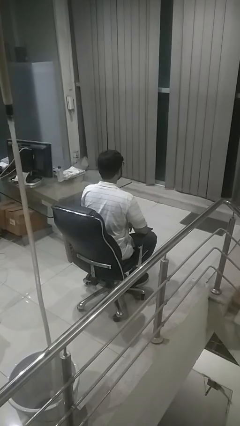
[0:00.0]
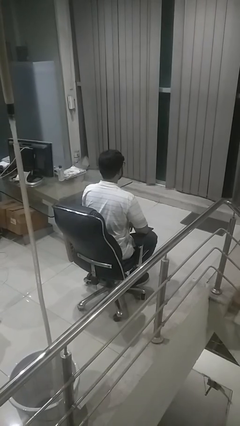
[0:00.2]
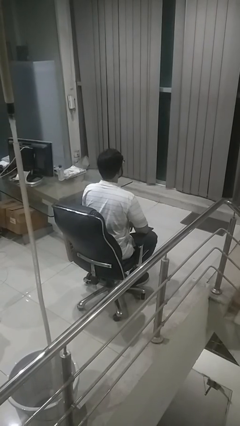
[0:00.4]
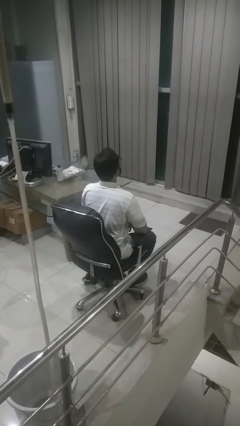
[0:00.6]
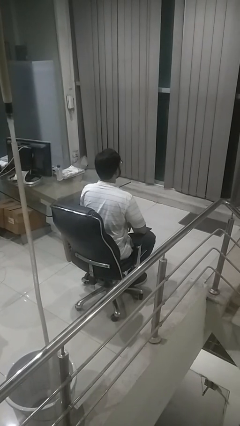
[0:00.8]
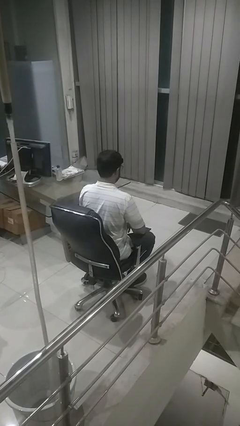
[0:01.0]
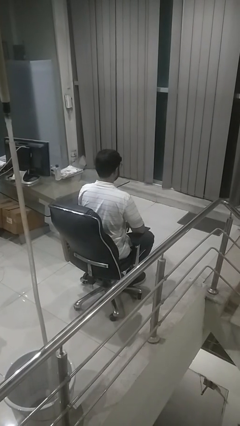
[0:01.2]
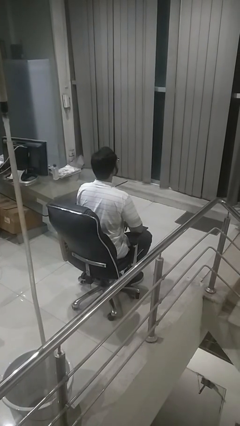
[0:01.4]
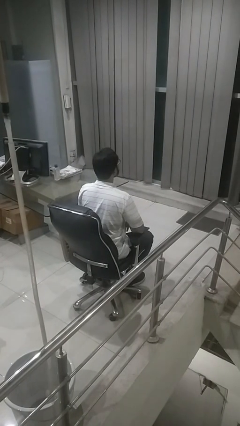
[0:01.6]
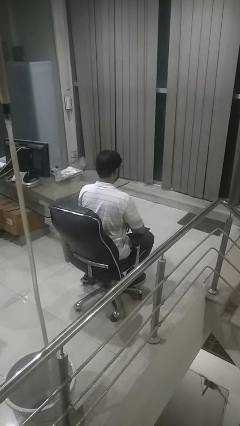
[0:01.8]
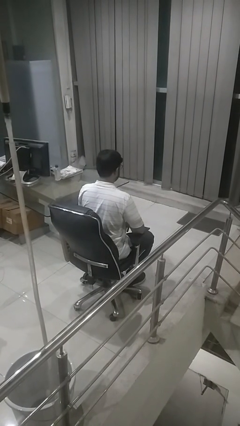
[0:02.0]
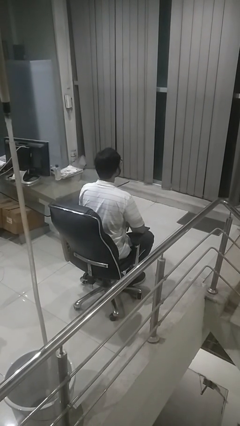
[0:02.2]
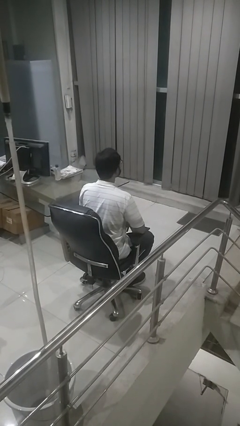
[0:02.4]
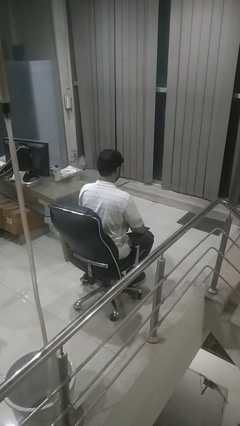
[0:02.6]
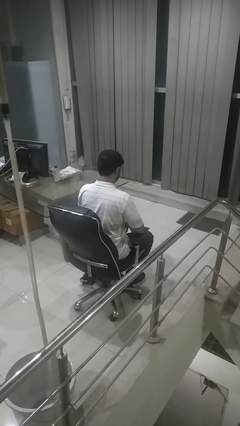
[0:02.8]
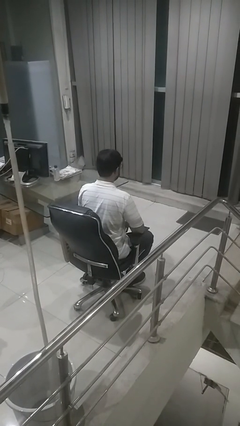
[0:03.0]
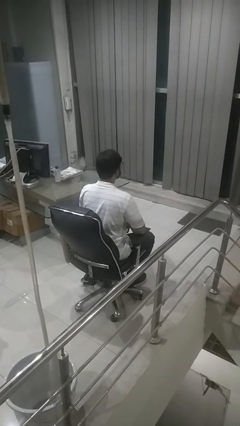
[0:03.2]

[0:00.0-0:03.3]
person nods head

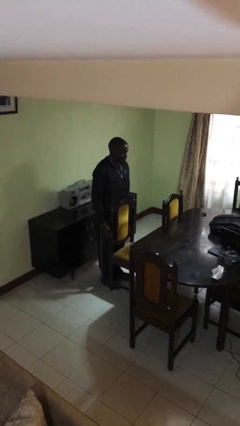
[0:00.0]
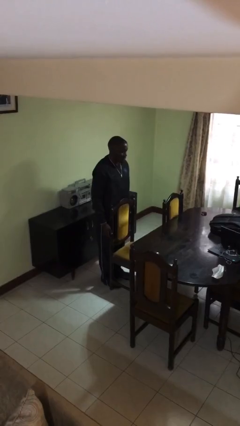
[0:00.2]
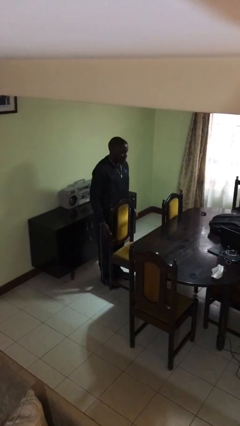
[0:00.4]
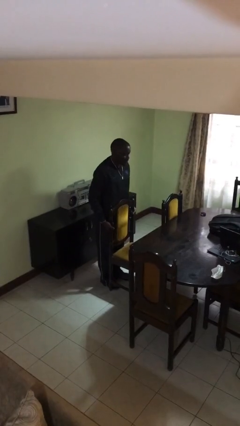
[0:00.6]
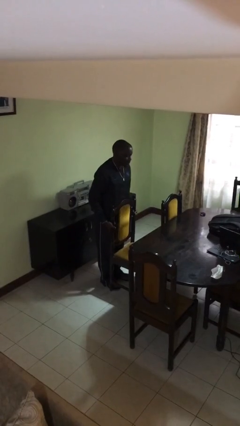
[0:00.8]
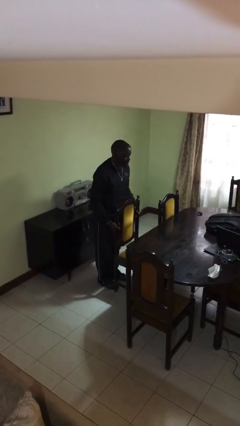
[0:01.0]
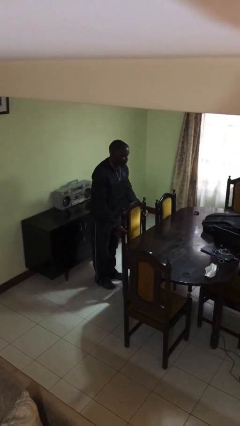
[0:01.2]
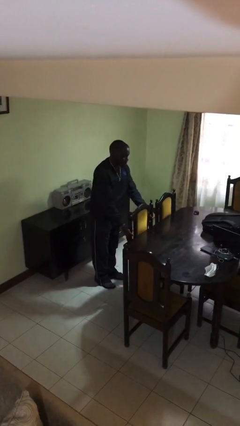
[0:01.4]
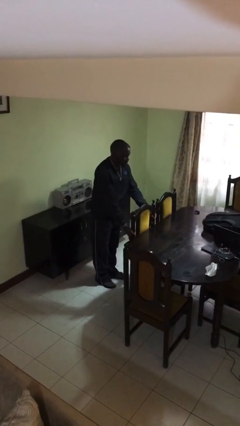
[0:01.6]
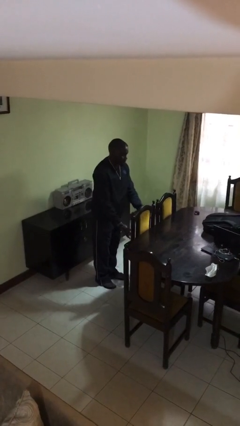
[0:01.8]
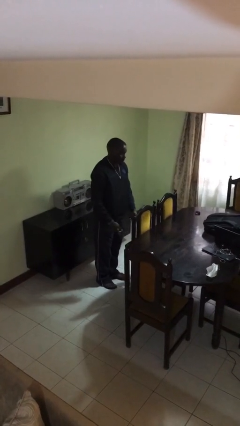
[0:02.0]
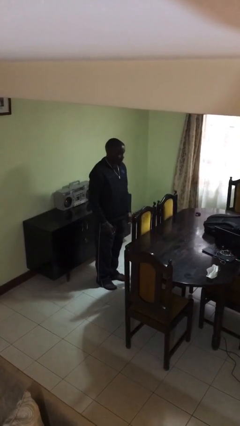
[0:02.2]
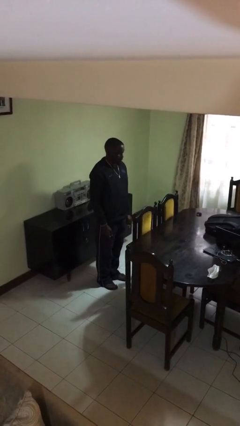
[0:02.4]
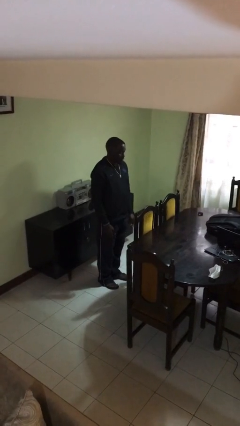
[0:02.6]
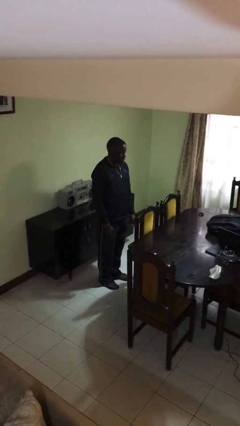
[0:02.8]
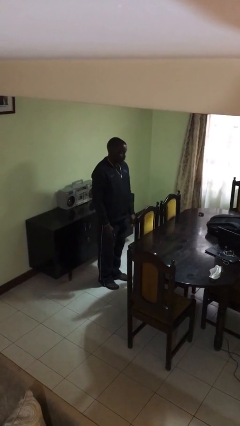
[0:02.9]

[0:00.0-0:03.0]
person pushes in chair

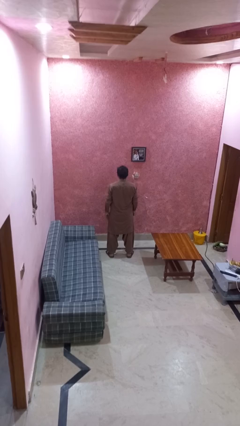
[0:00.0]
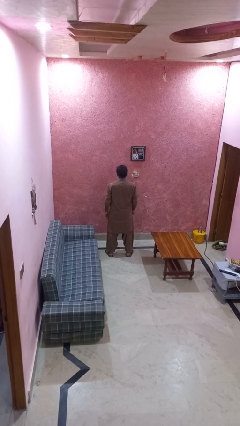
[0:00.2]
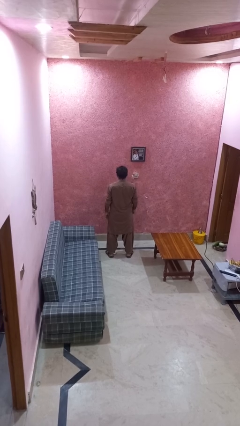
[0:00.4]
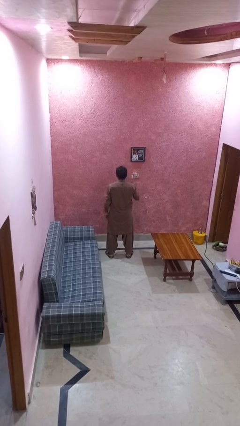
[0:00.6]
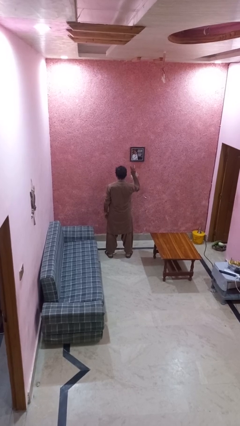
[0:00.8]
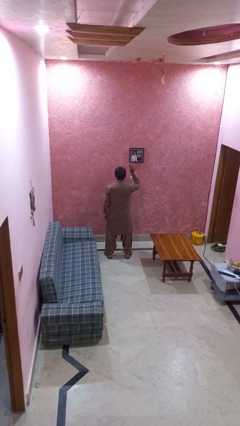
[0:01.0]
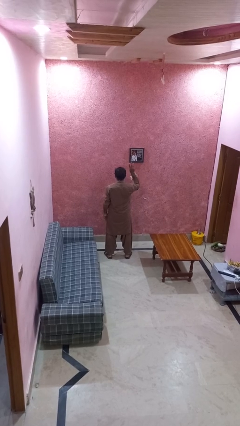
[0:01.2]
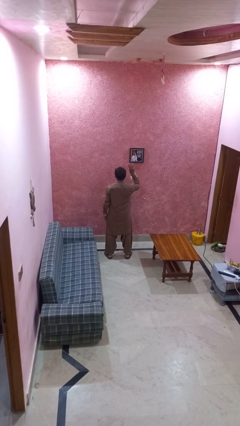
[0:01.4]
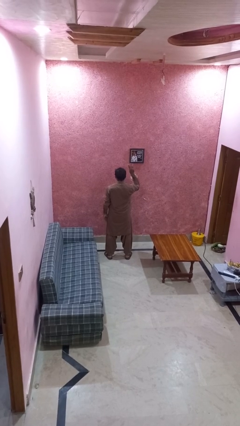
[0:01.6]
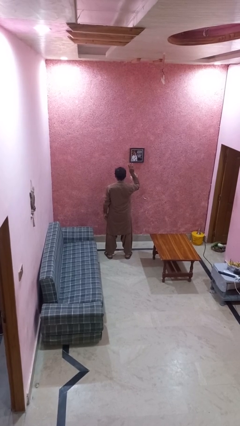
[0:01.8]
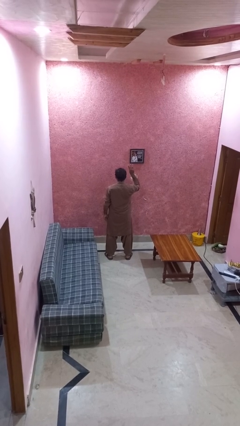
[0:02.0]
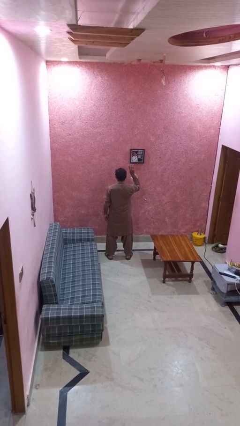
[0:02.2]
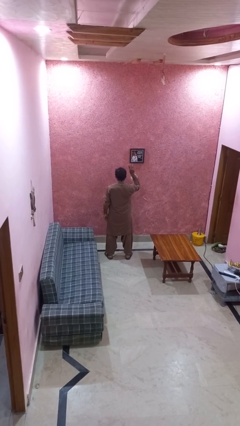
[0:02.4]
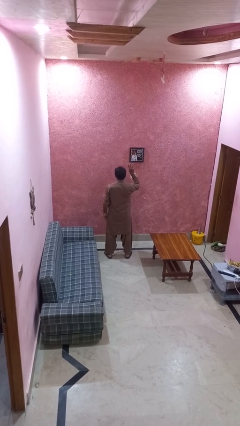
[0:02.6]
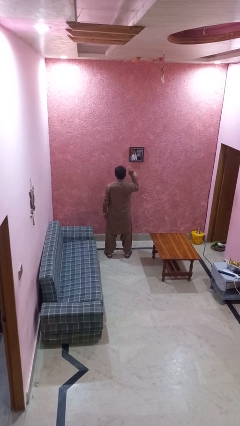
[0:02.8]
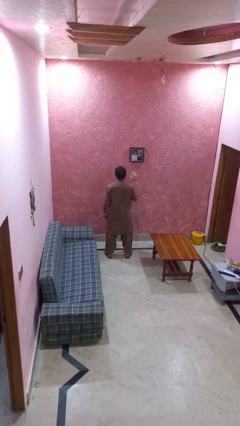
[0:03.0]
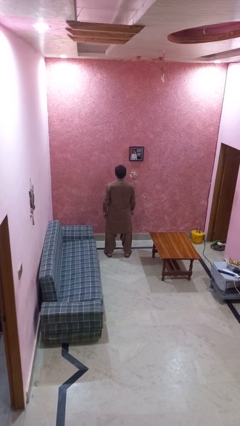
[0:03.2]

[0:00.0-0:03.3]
person gestures number three

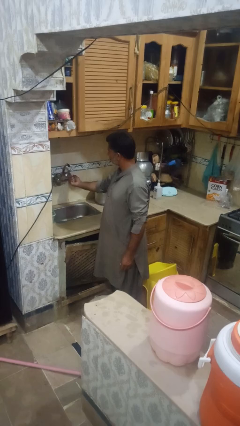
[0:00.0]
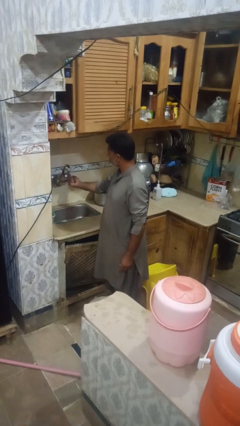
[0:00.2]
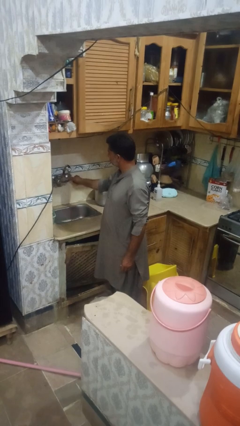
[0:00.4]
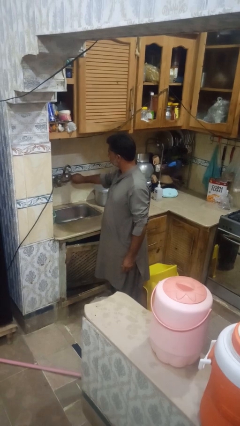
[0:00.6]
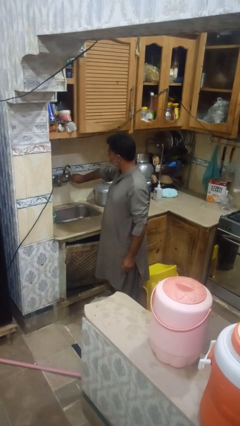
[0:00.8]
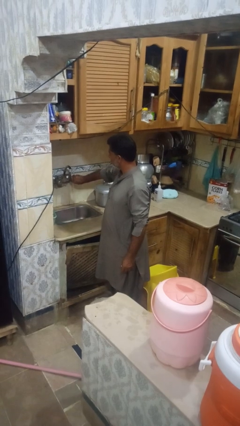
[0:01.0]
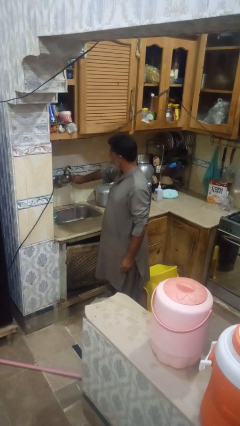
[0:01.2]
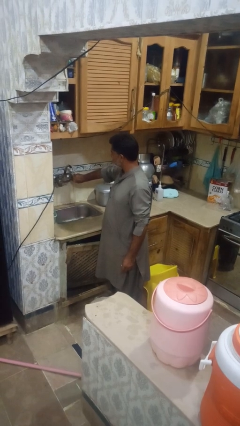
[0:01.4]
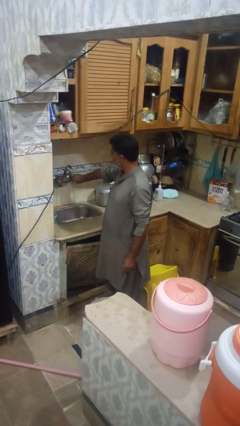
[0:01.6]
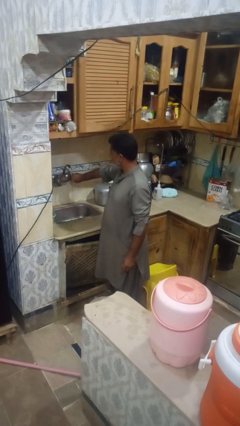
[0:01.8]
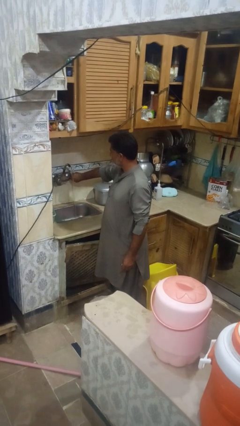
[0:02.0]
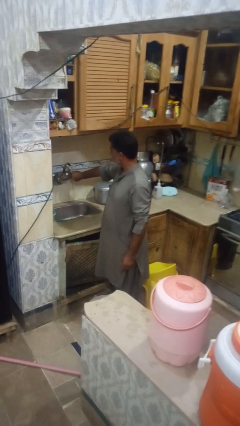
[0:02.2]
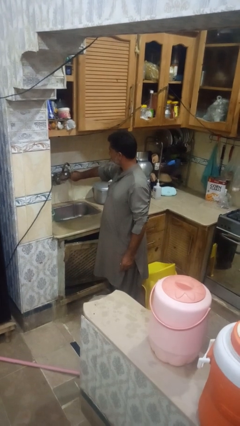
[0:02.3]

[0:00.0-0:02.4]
person turns on faucet

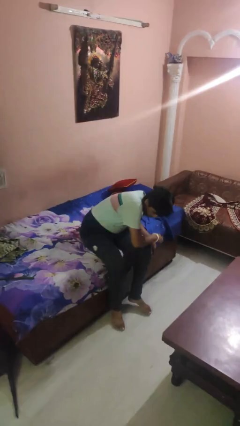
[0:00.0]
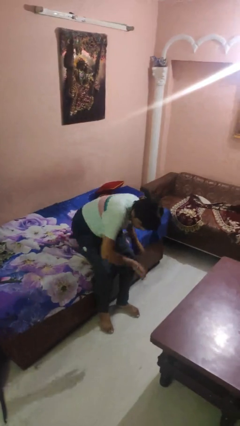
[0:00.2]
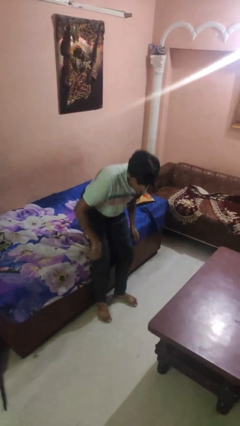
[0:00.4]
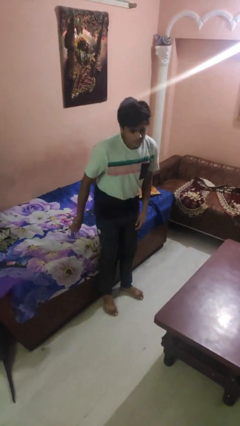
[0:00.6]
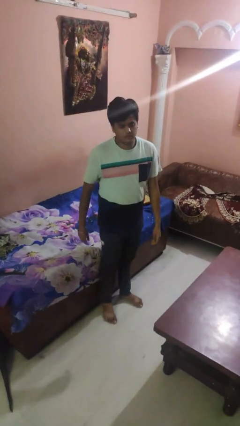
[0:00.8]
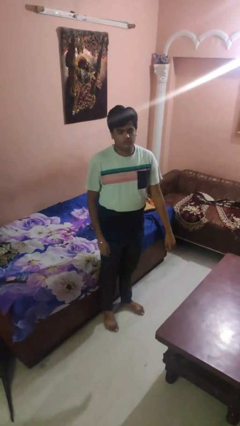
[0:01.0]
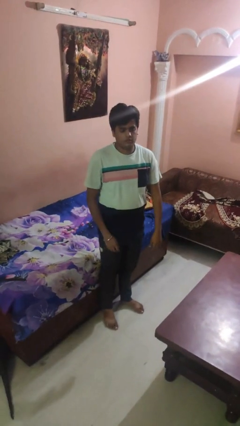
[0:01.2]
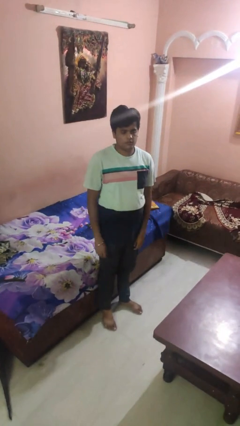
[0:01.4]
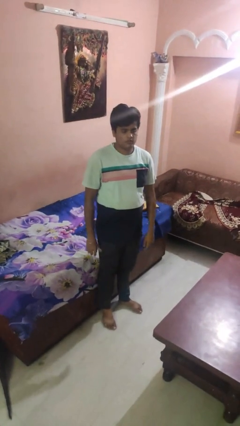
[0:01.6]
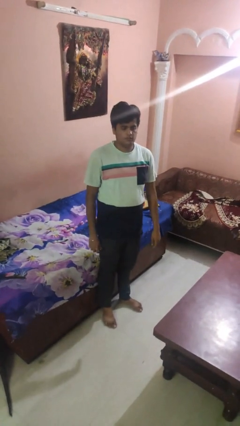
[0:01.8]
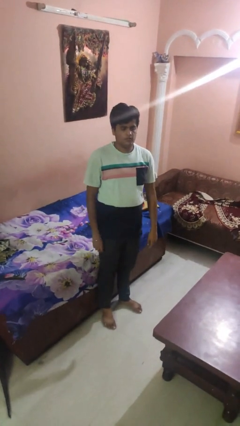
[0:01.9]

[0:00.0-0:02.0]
person stands up

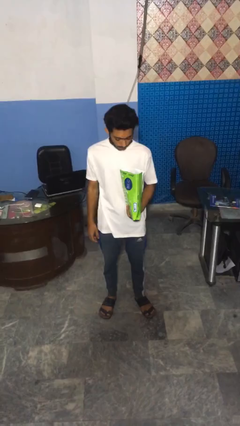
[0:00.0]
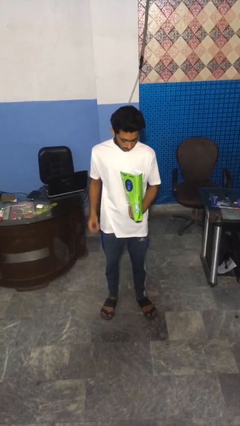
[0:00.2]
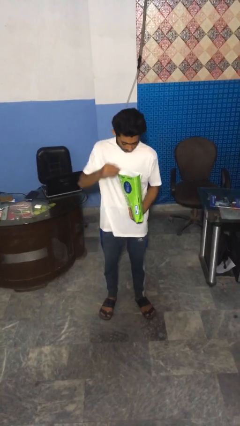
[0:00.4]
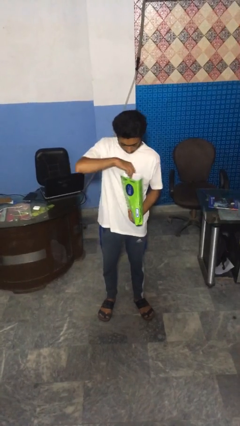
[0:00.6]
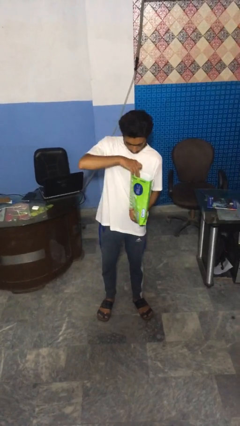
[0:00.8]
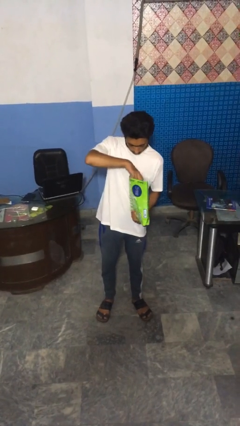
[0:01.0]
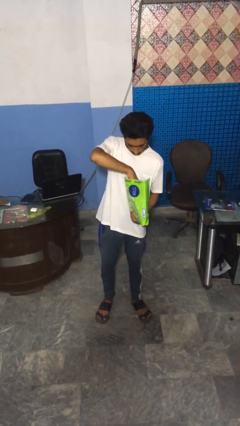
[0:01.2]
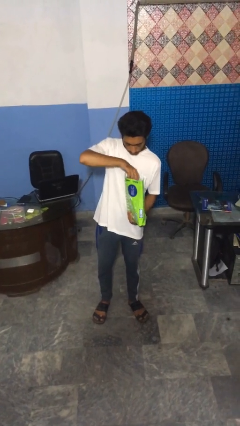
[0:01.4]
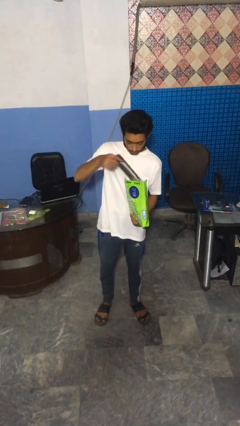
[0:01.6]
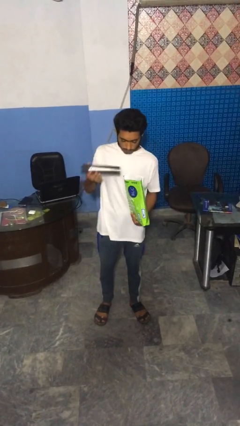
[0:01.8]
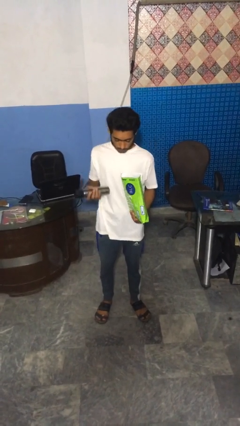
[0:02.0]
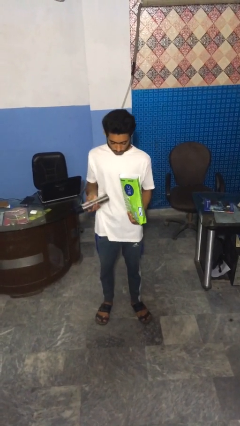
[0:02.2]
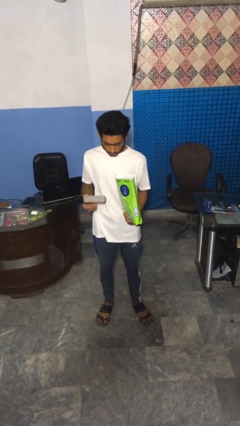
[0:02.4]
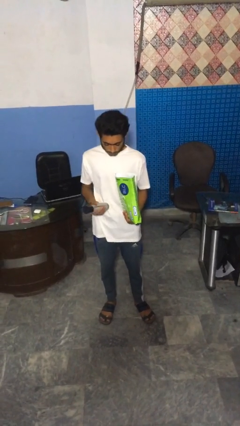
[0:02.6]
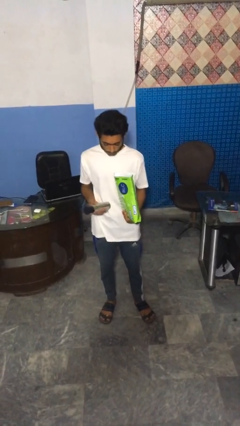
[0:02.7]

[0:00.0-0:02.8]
person takes object from bag

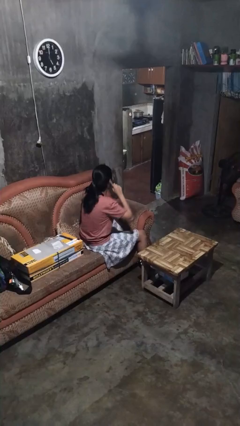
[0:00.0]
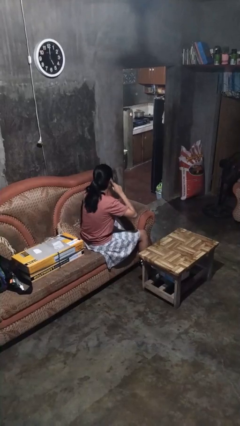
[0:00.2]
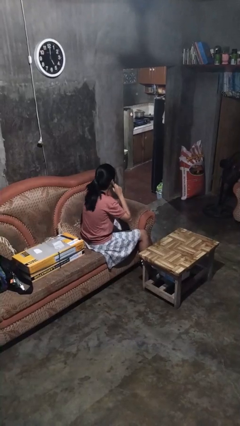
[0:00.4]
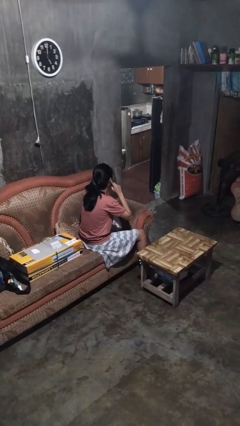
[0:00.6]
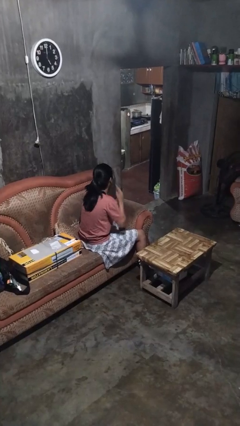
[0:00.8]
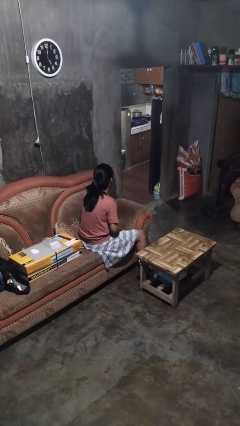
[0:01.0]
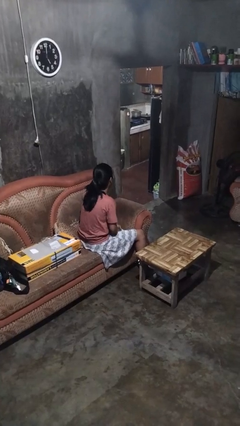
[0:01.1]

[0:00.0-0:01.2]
person puts fingers in ear
